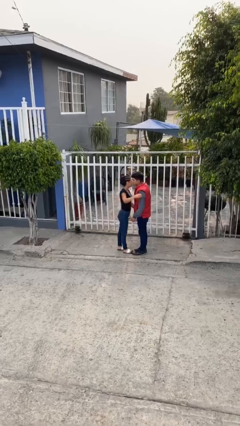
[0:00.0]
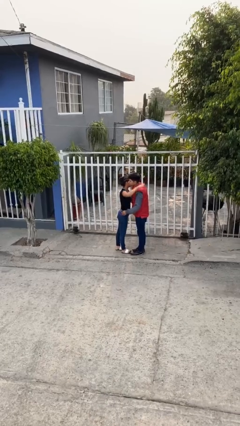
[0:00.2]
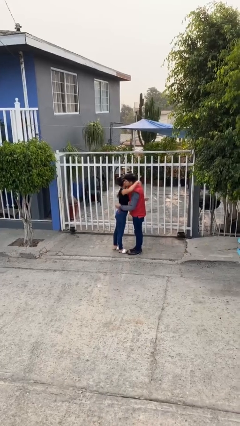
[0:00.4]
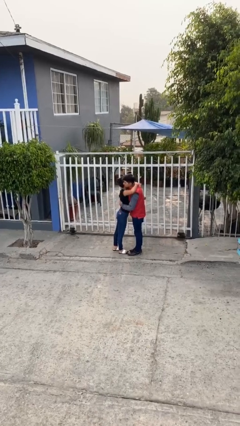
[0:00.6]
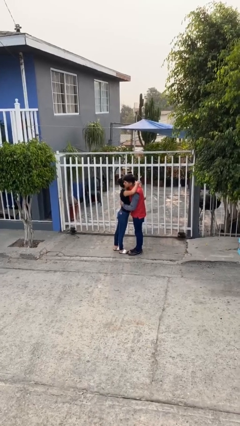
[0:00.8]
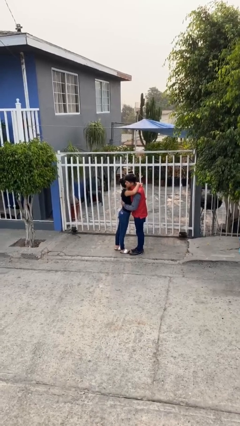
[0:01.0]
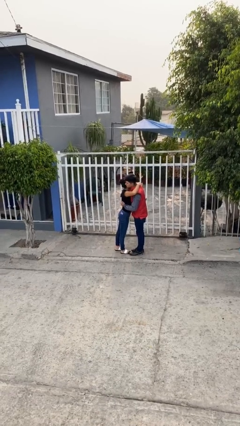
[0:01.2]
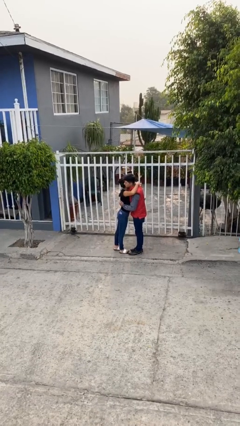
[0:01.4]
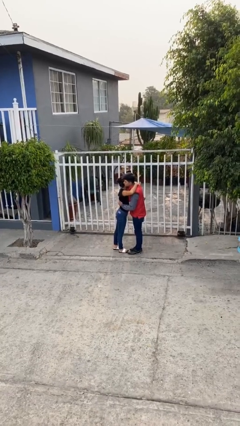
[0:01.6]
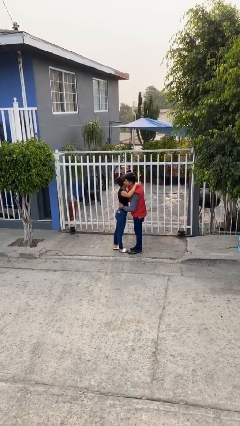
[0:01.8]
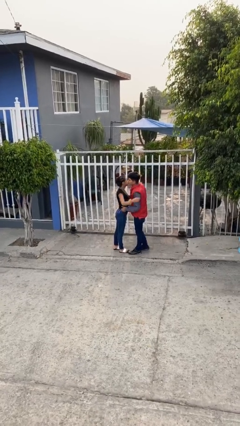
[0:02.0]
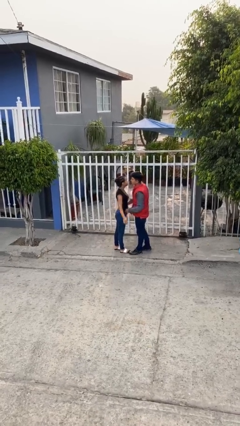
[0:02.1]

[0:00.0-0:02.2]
person embraces person

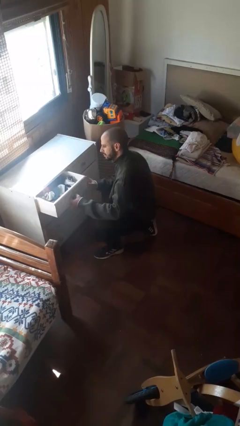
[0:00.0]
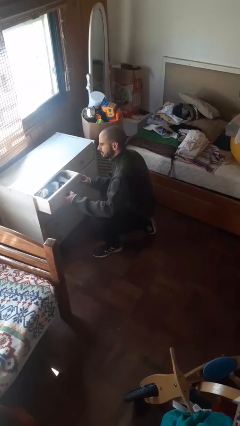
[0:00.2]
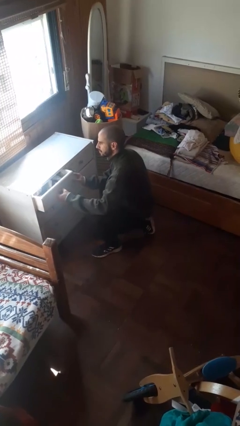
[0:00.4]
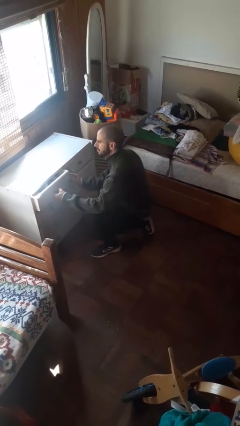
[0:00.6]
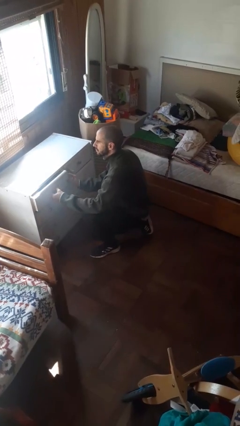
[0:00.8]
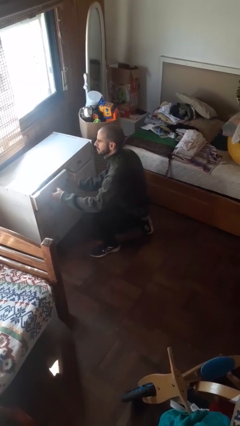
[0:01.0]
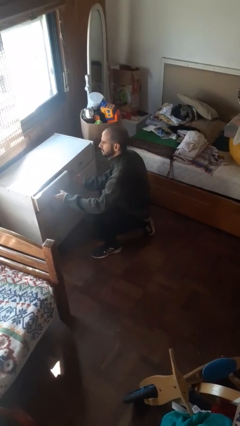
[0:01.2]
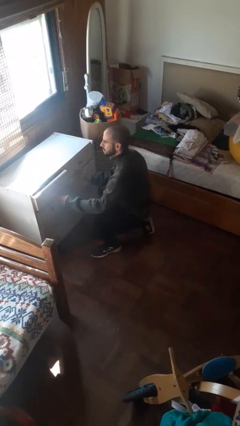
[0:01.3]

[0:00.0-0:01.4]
person closes dresser drawer

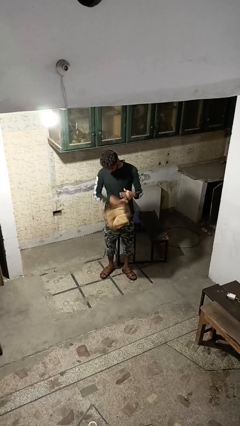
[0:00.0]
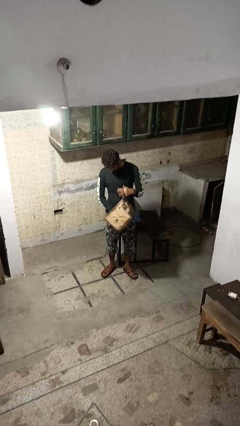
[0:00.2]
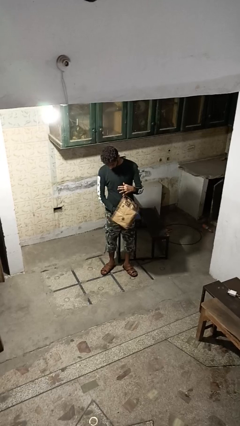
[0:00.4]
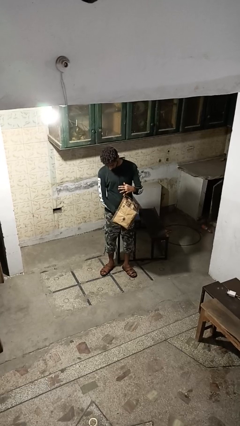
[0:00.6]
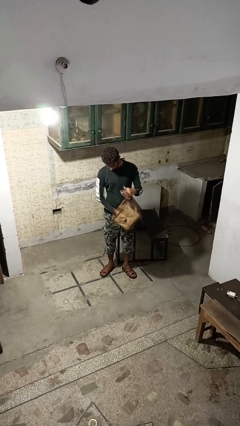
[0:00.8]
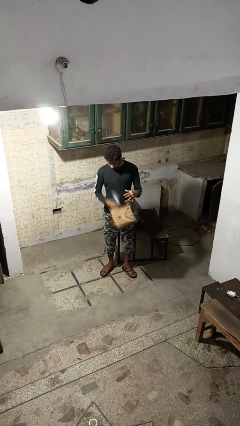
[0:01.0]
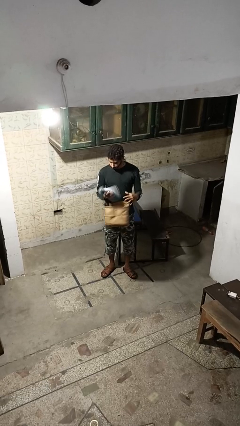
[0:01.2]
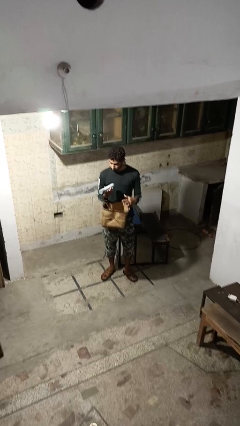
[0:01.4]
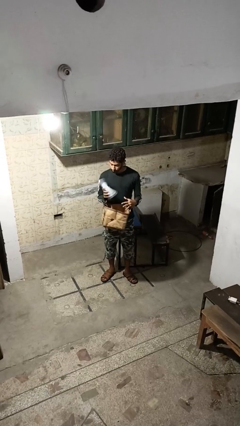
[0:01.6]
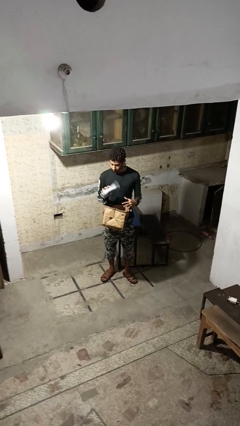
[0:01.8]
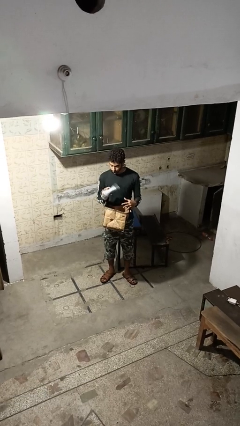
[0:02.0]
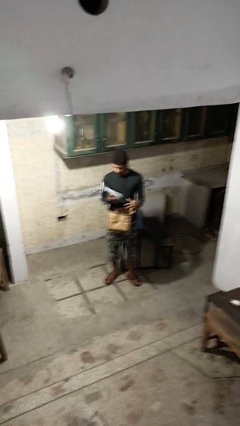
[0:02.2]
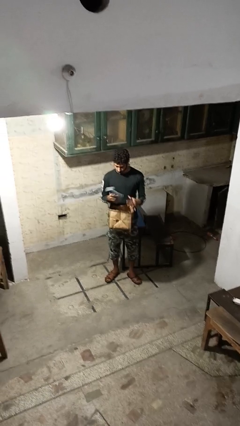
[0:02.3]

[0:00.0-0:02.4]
person takes object from purse

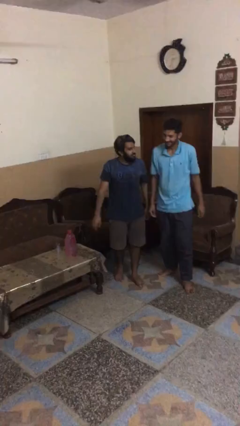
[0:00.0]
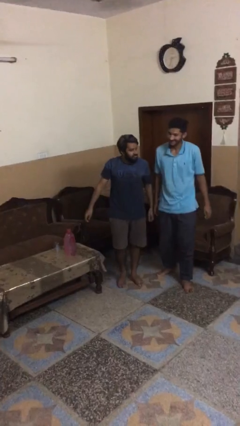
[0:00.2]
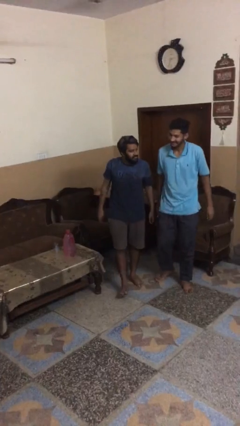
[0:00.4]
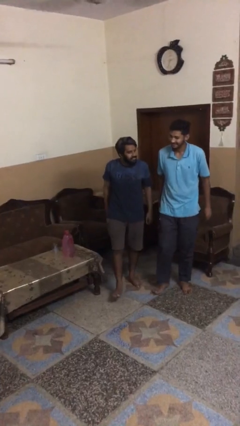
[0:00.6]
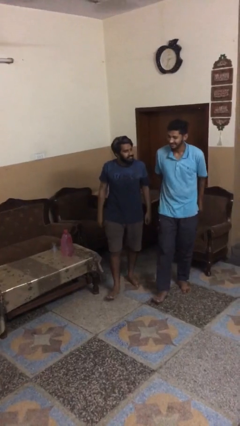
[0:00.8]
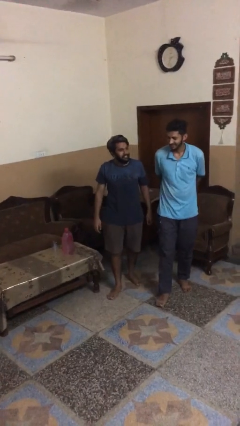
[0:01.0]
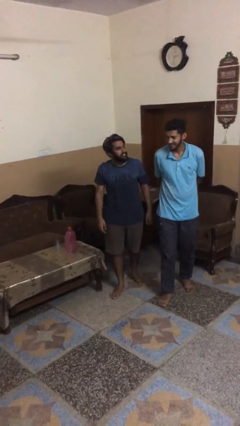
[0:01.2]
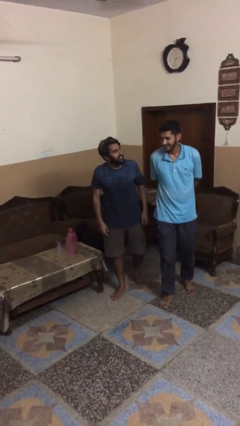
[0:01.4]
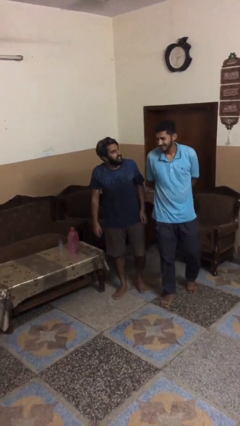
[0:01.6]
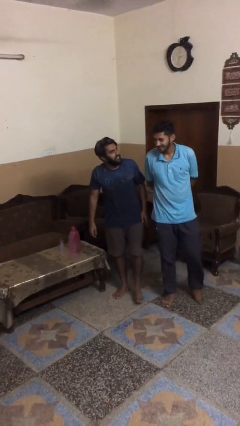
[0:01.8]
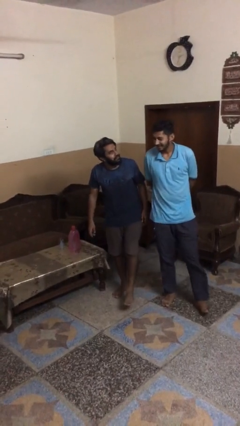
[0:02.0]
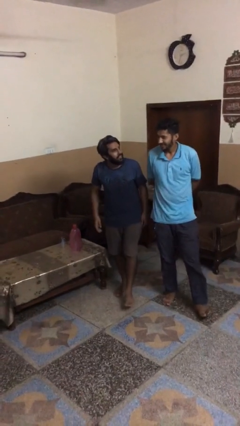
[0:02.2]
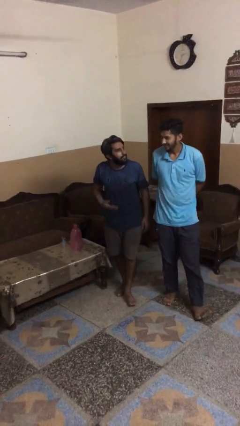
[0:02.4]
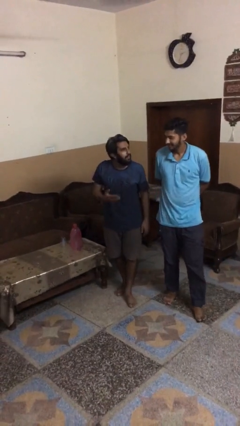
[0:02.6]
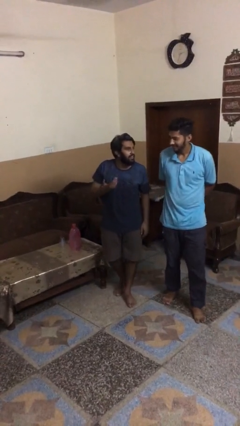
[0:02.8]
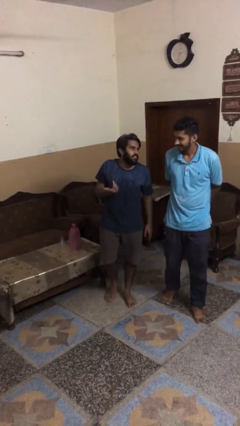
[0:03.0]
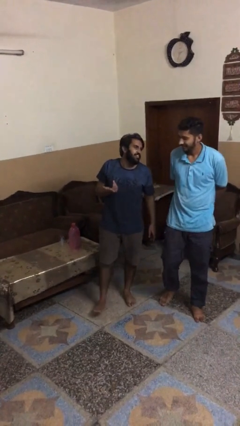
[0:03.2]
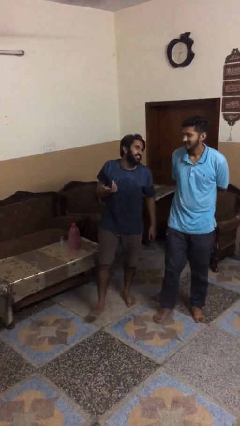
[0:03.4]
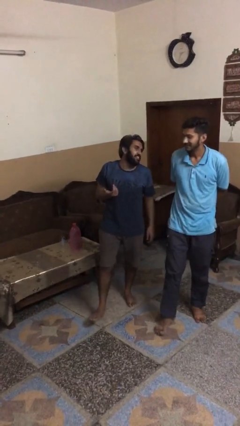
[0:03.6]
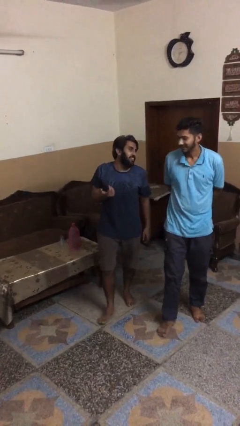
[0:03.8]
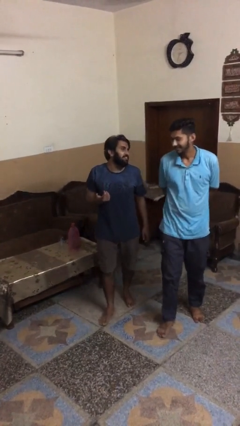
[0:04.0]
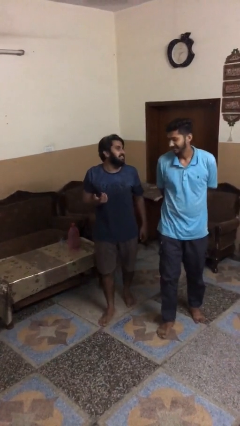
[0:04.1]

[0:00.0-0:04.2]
person talks to person

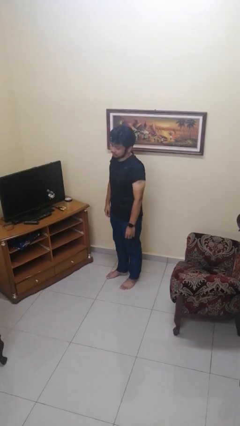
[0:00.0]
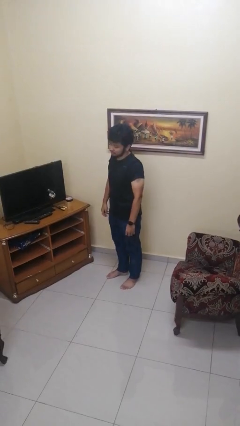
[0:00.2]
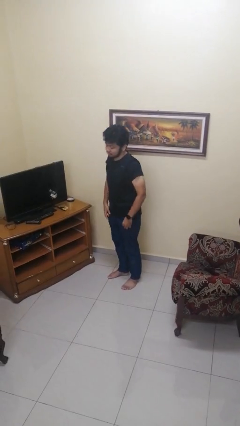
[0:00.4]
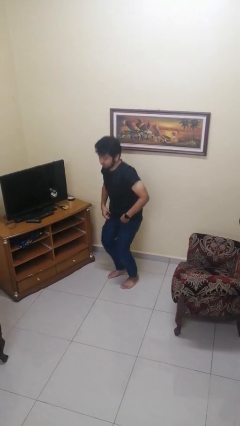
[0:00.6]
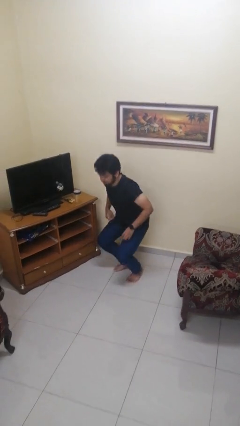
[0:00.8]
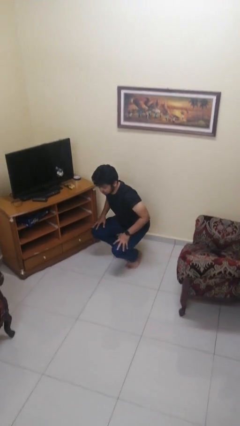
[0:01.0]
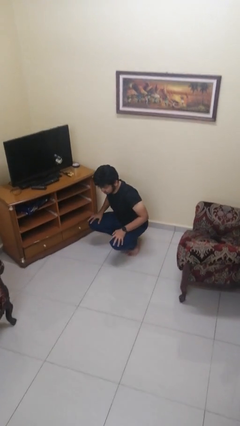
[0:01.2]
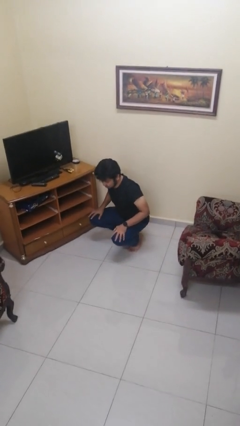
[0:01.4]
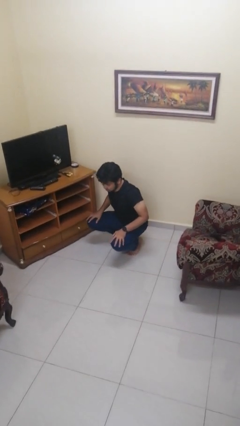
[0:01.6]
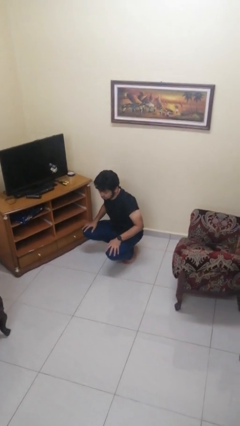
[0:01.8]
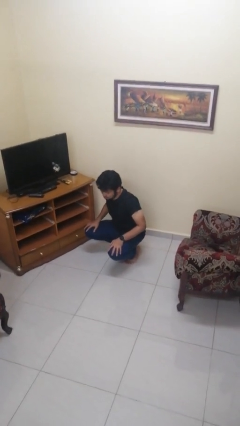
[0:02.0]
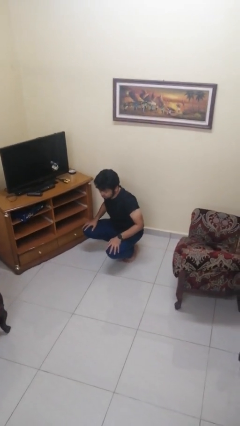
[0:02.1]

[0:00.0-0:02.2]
person squats

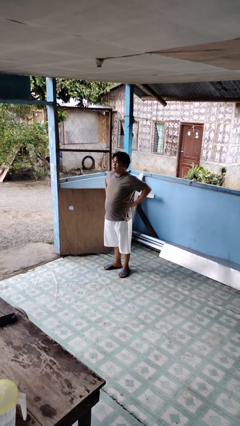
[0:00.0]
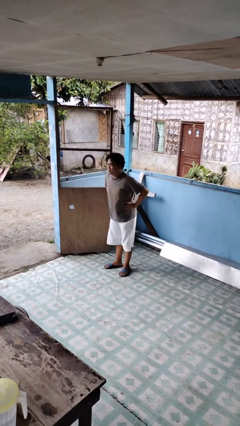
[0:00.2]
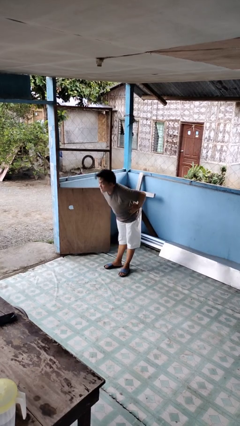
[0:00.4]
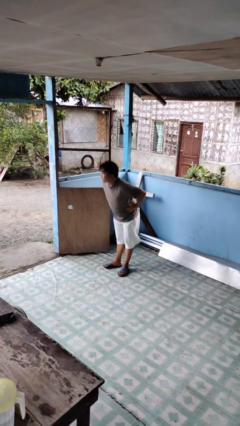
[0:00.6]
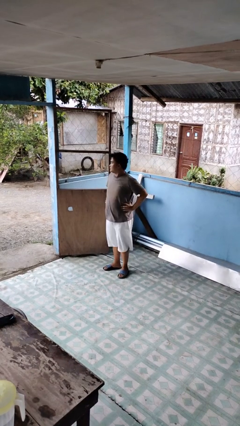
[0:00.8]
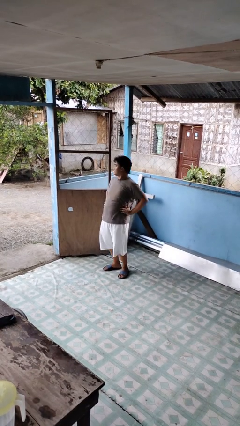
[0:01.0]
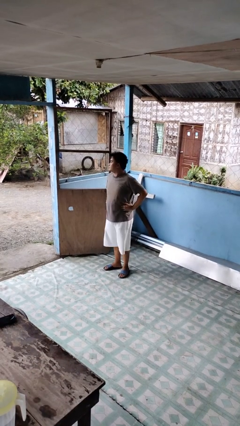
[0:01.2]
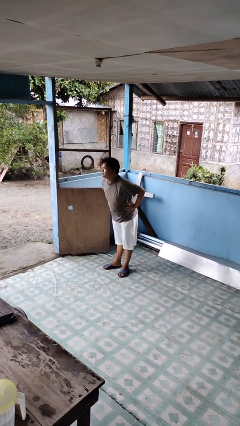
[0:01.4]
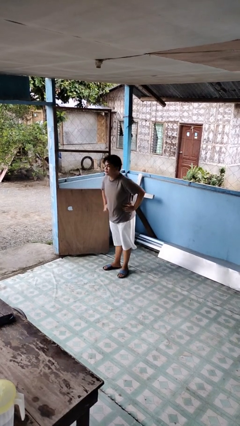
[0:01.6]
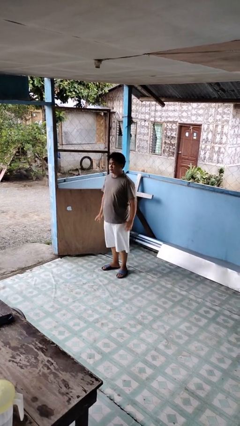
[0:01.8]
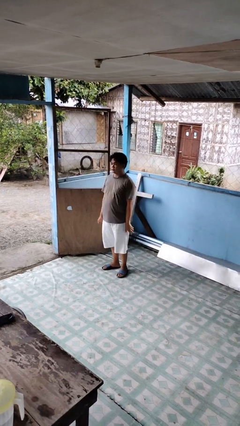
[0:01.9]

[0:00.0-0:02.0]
person wiggles hips

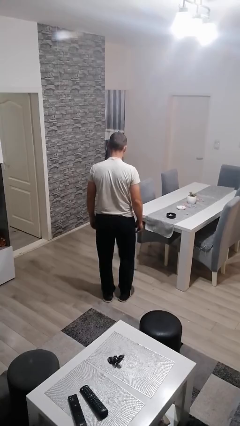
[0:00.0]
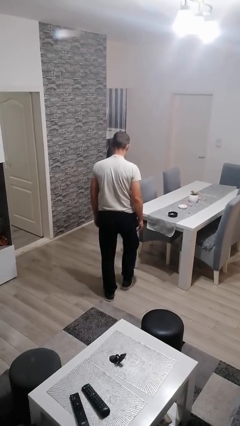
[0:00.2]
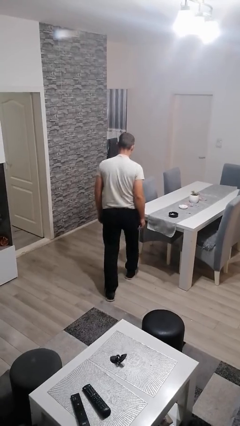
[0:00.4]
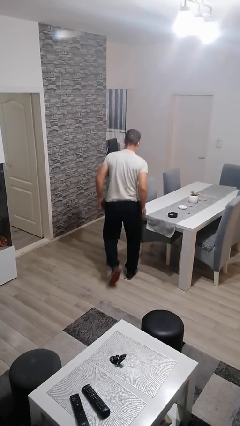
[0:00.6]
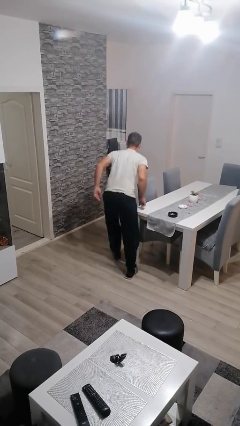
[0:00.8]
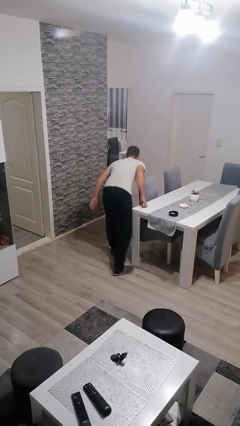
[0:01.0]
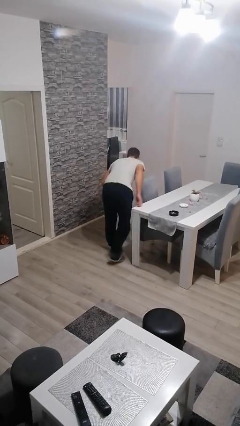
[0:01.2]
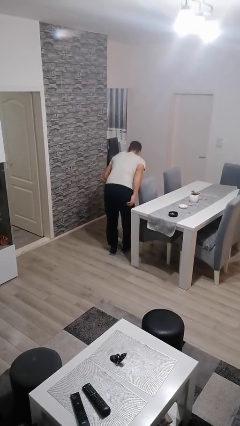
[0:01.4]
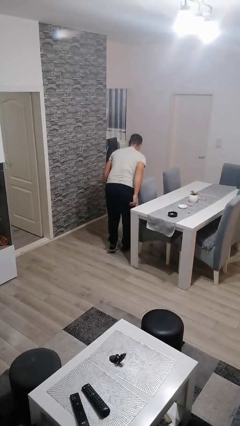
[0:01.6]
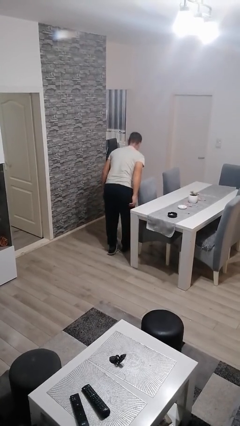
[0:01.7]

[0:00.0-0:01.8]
person bumps into table

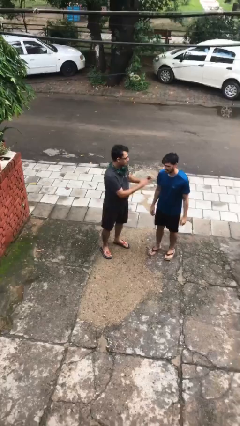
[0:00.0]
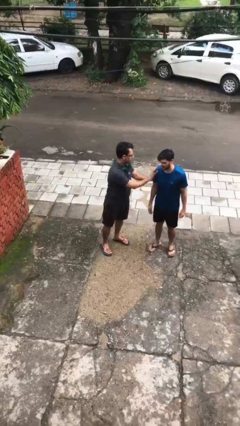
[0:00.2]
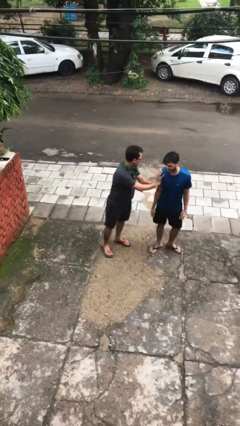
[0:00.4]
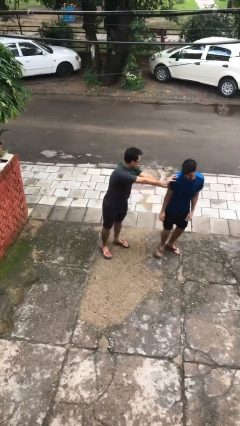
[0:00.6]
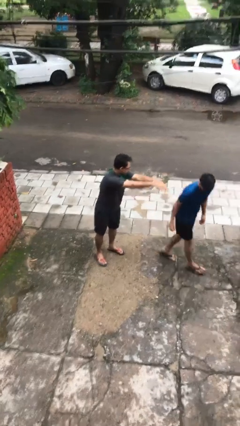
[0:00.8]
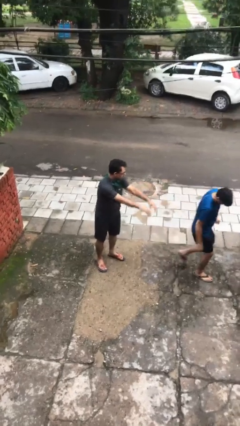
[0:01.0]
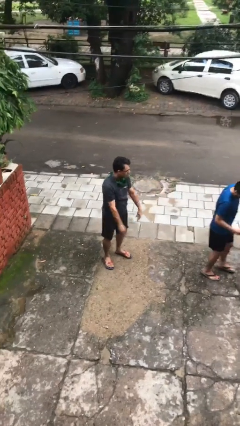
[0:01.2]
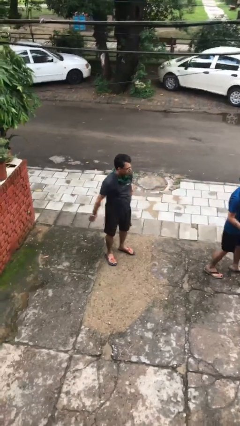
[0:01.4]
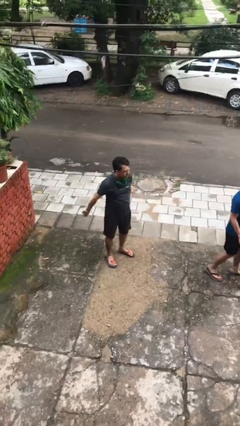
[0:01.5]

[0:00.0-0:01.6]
person shoves person
